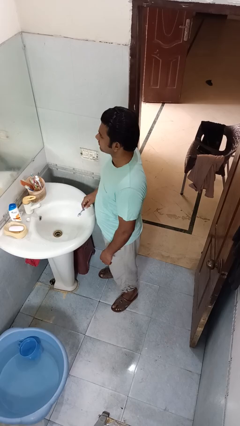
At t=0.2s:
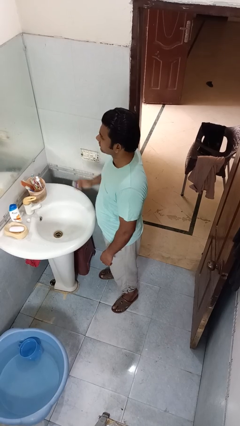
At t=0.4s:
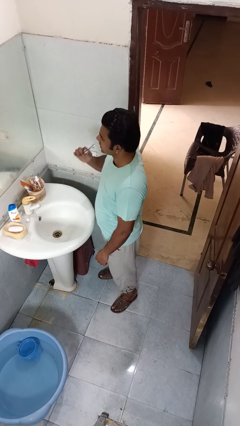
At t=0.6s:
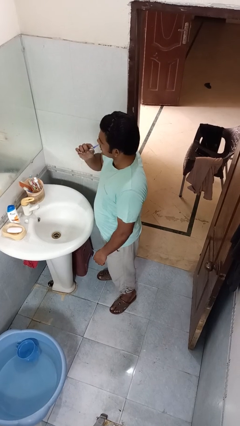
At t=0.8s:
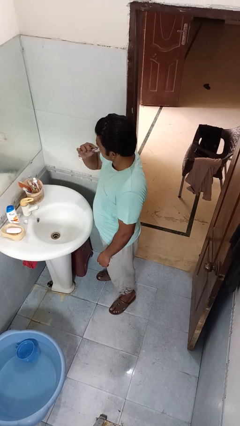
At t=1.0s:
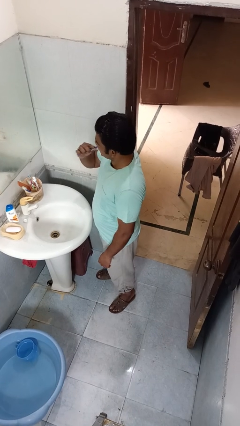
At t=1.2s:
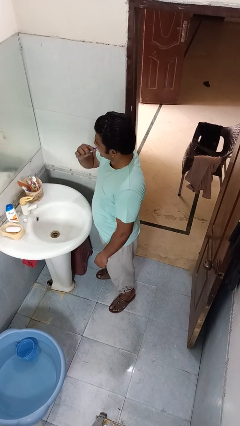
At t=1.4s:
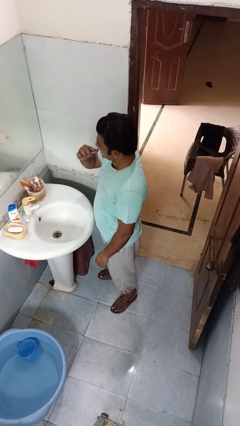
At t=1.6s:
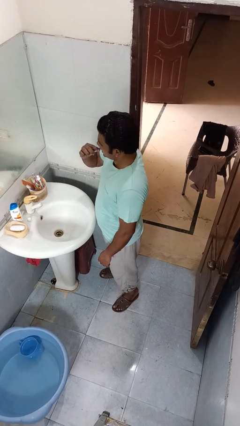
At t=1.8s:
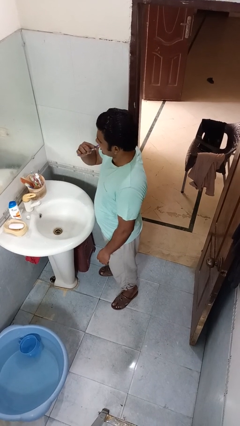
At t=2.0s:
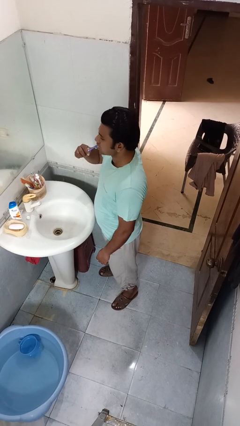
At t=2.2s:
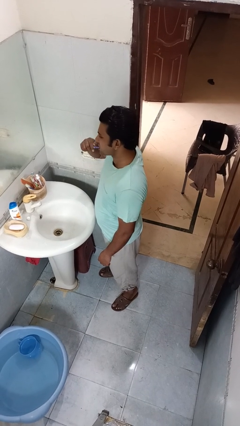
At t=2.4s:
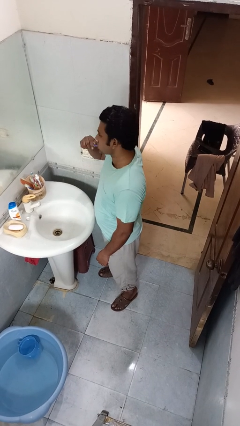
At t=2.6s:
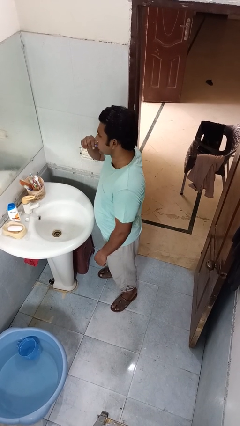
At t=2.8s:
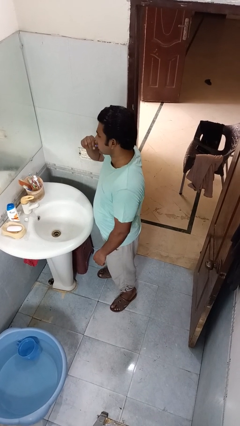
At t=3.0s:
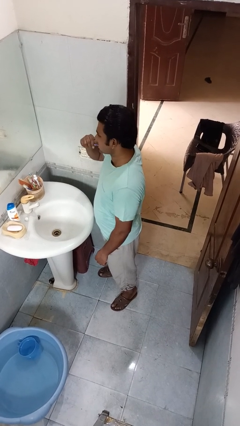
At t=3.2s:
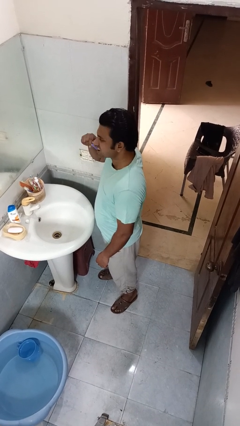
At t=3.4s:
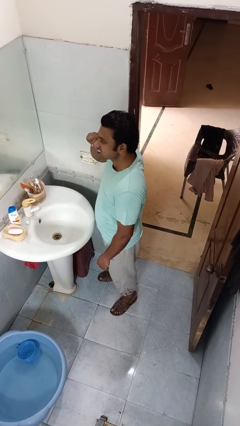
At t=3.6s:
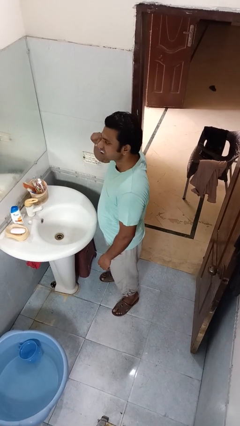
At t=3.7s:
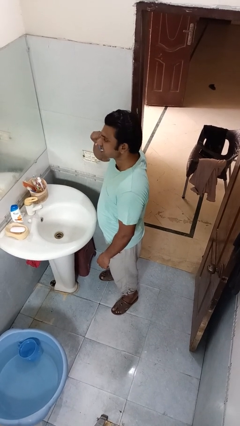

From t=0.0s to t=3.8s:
person brushes teeth

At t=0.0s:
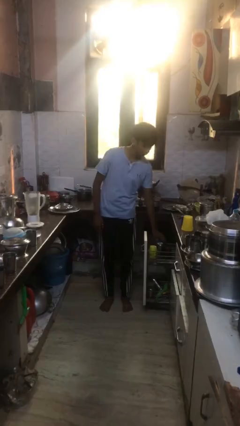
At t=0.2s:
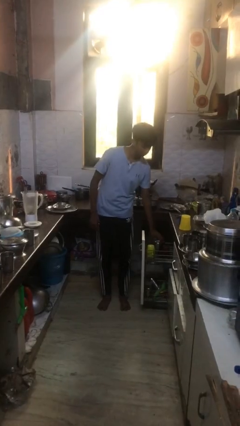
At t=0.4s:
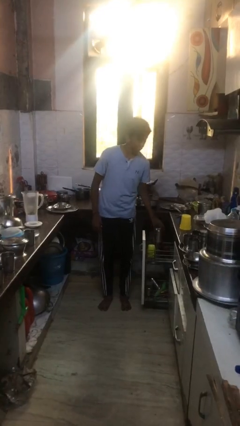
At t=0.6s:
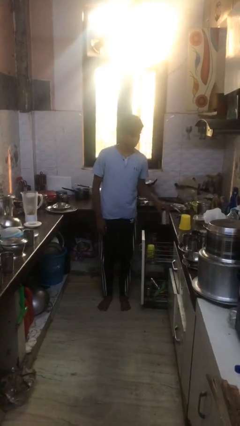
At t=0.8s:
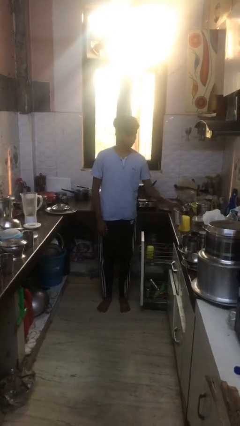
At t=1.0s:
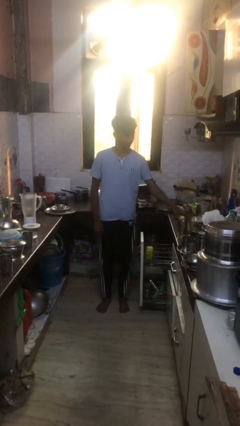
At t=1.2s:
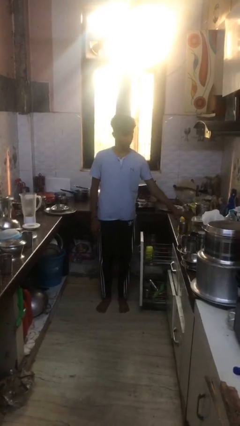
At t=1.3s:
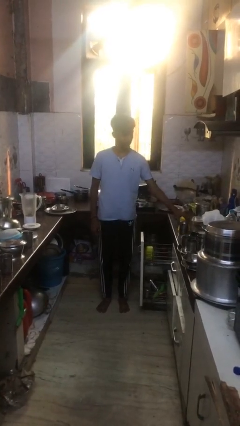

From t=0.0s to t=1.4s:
person unloads dishwasher

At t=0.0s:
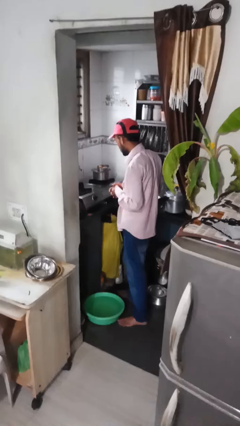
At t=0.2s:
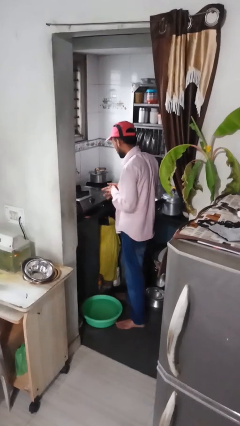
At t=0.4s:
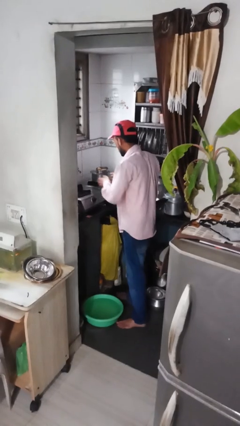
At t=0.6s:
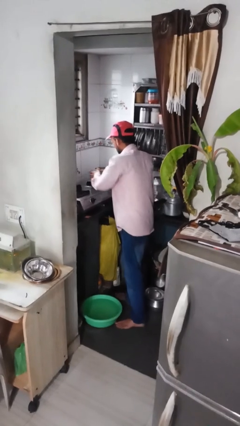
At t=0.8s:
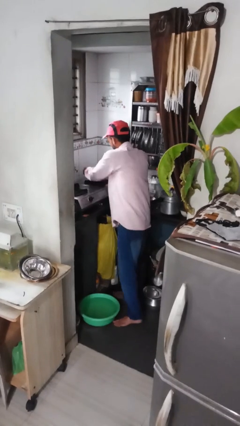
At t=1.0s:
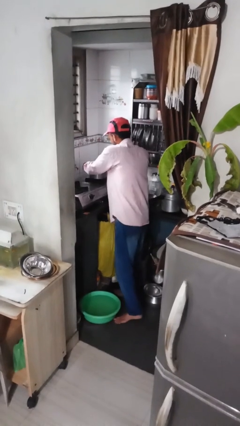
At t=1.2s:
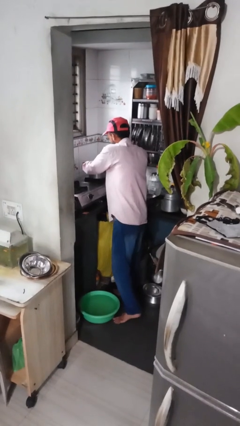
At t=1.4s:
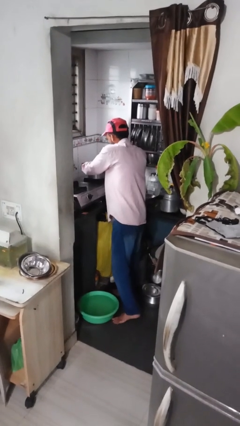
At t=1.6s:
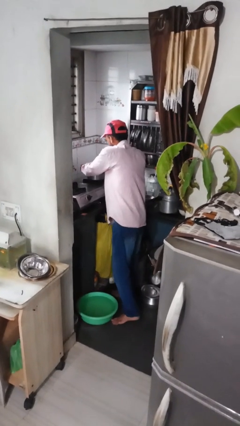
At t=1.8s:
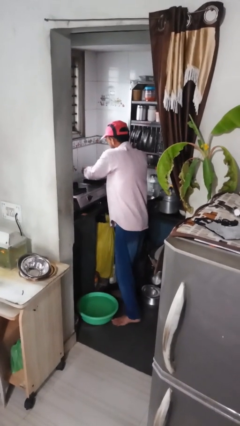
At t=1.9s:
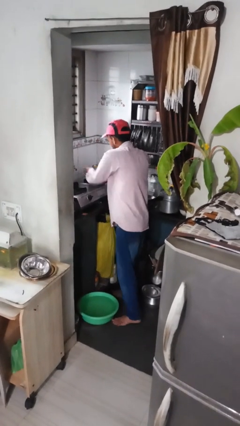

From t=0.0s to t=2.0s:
person burns hand

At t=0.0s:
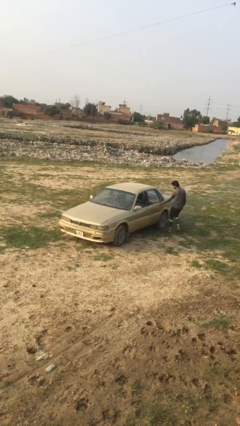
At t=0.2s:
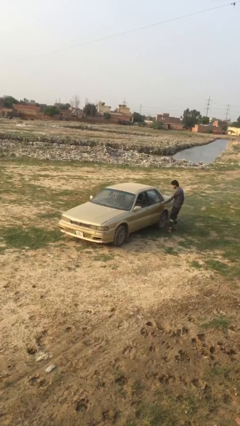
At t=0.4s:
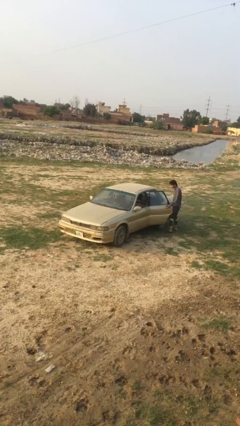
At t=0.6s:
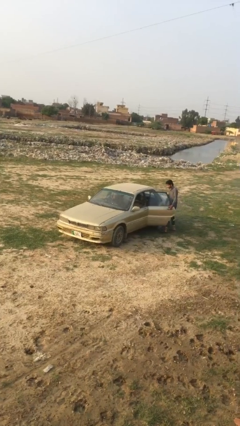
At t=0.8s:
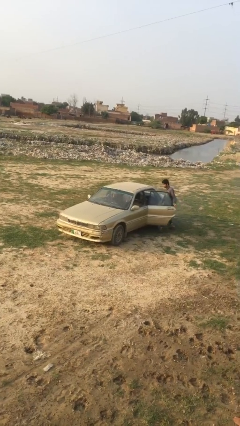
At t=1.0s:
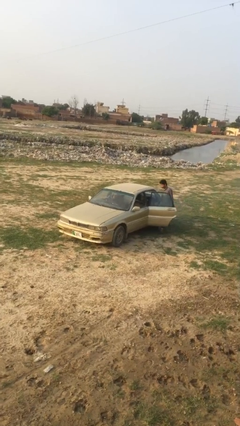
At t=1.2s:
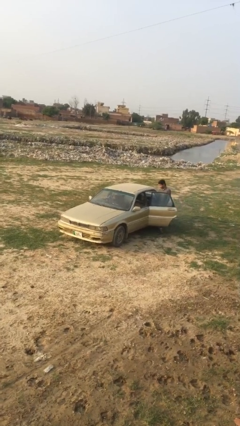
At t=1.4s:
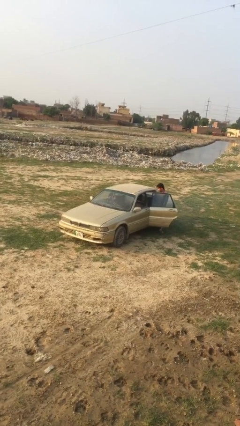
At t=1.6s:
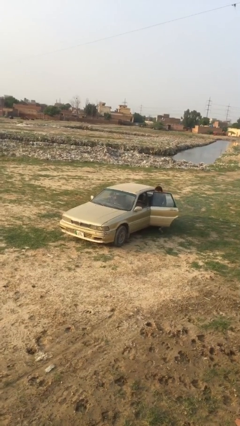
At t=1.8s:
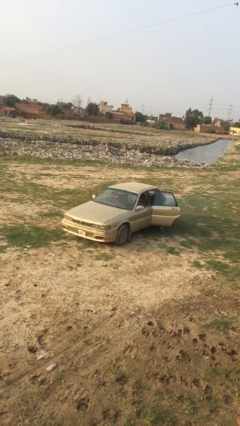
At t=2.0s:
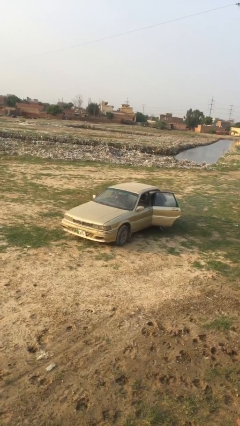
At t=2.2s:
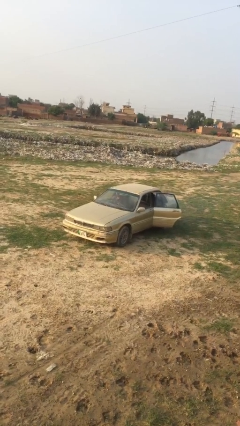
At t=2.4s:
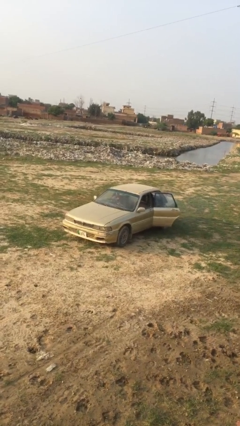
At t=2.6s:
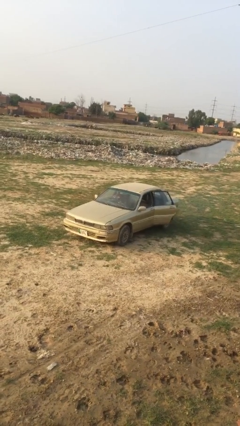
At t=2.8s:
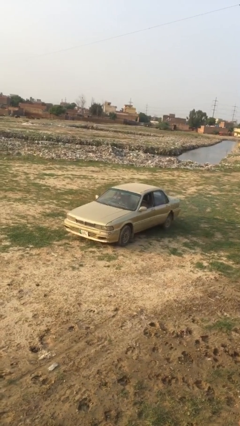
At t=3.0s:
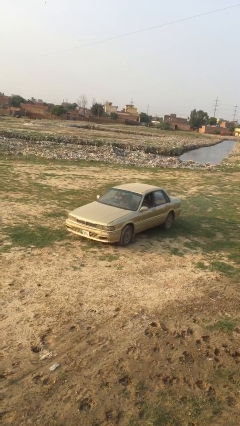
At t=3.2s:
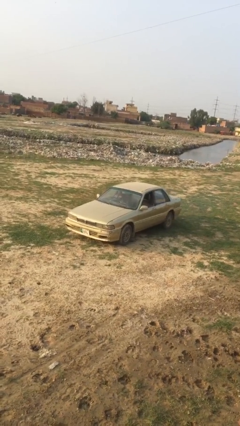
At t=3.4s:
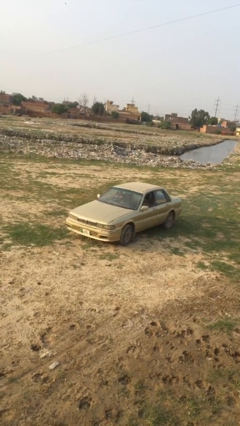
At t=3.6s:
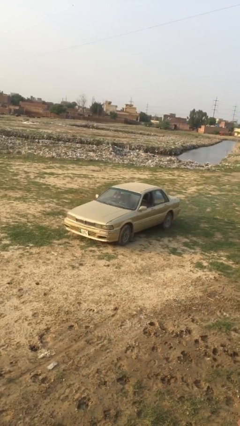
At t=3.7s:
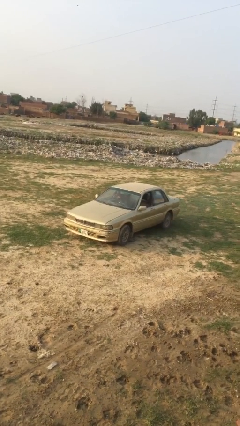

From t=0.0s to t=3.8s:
car picks up person

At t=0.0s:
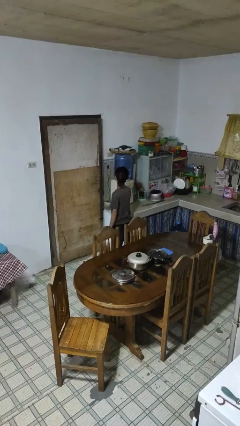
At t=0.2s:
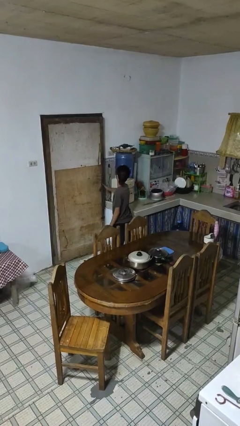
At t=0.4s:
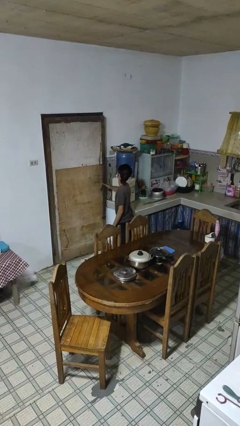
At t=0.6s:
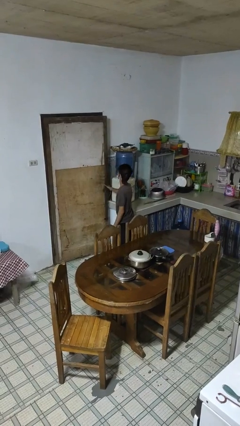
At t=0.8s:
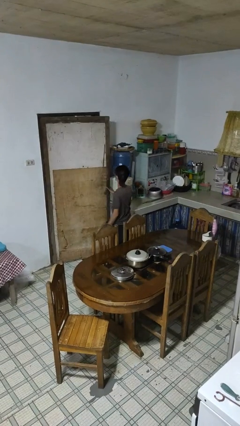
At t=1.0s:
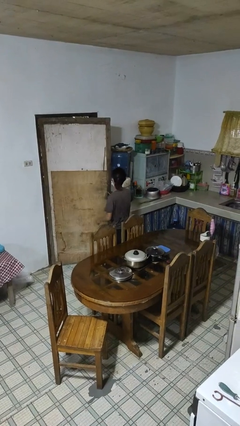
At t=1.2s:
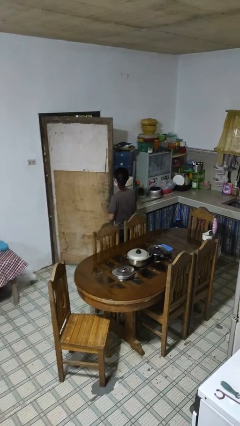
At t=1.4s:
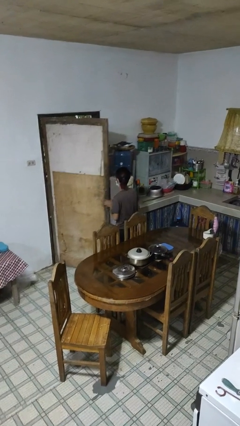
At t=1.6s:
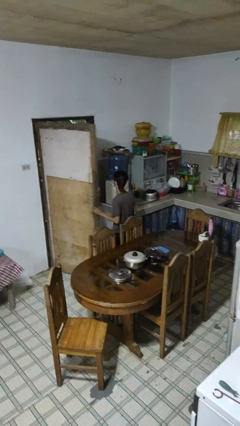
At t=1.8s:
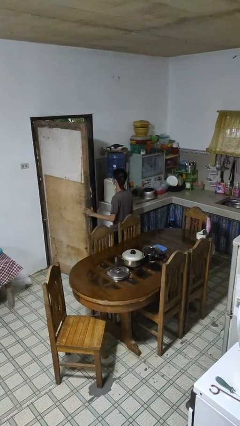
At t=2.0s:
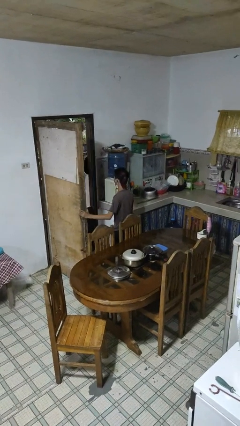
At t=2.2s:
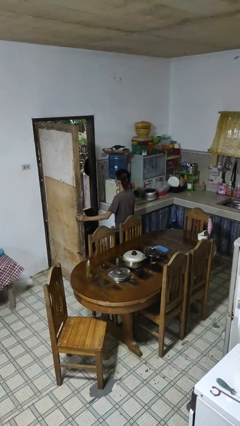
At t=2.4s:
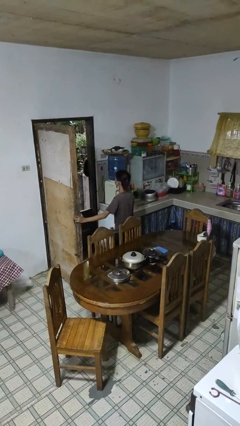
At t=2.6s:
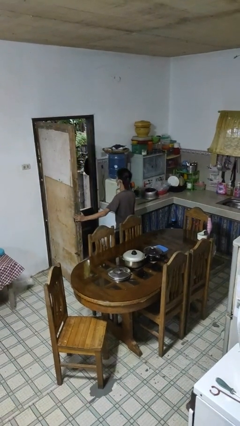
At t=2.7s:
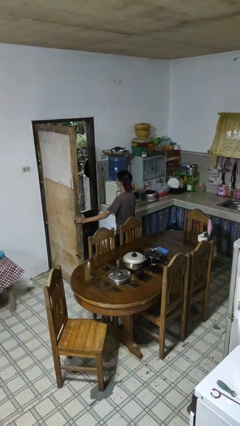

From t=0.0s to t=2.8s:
person opens facility door

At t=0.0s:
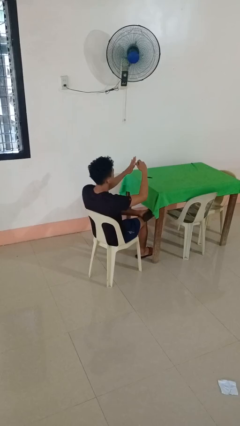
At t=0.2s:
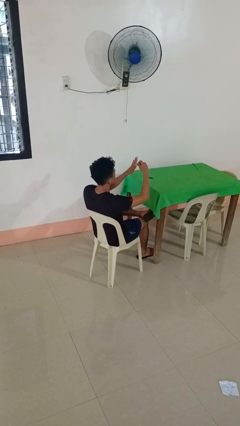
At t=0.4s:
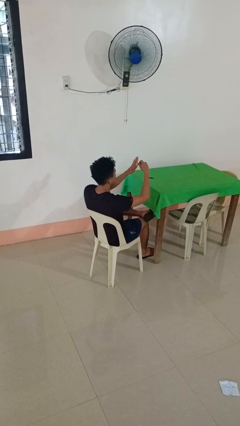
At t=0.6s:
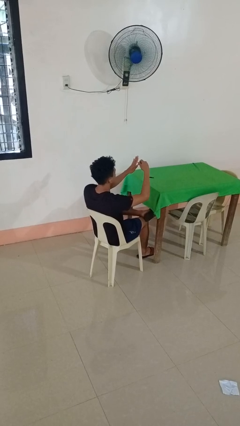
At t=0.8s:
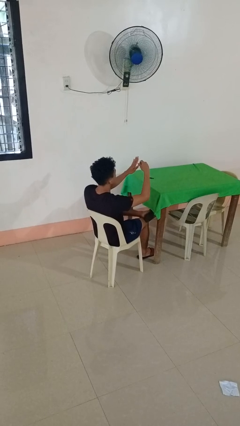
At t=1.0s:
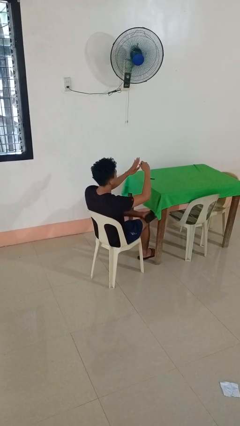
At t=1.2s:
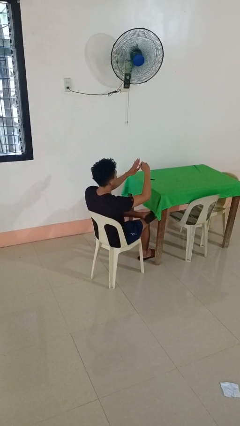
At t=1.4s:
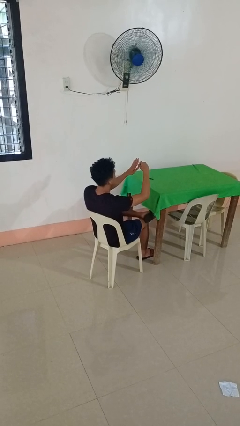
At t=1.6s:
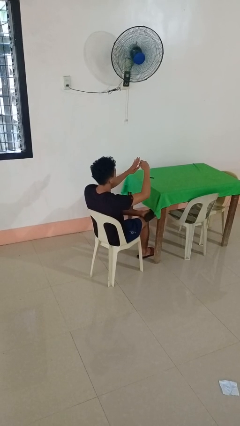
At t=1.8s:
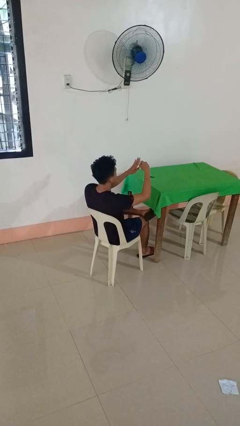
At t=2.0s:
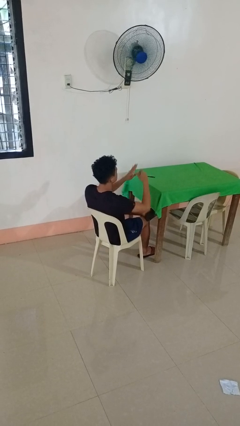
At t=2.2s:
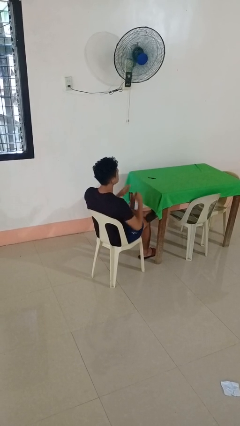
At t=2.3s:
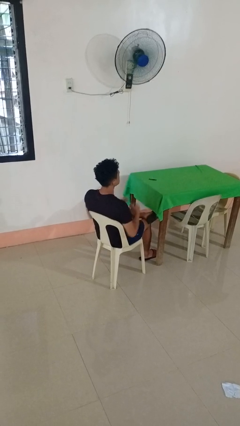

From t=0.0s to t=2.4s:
person clips fingernails

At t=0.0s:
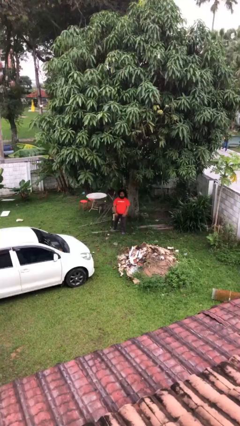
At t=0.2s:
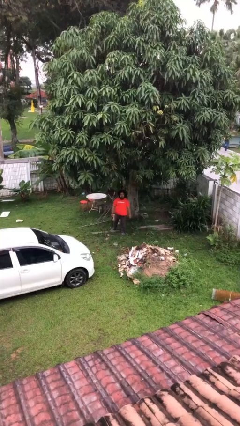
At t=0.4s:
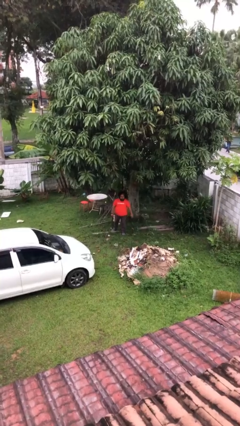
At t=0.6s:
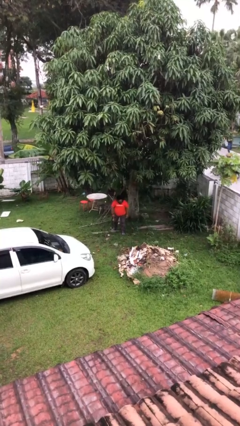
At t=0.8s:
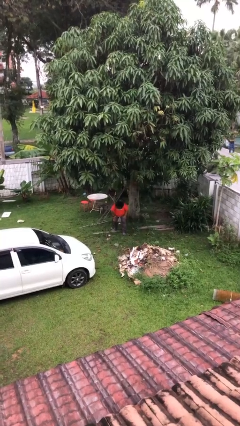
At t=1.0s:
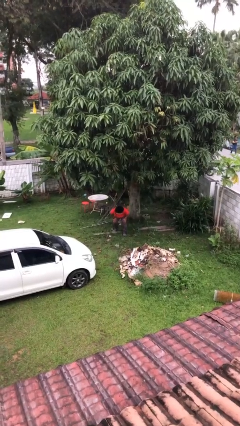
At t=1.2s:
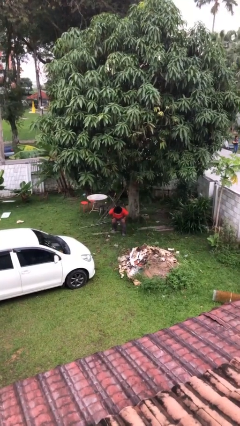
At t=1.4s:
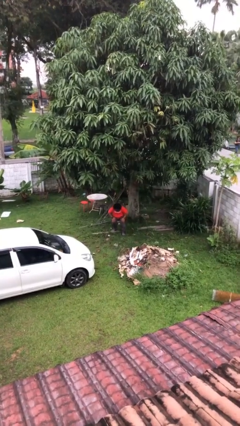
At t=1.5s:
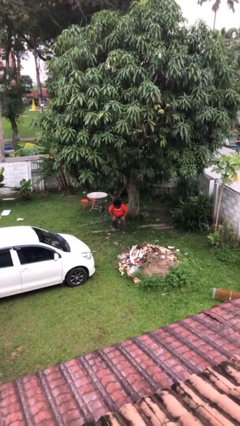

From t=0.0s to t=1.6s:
person sits down
